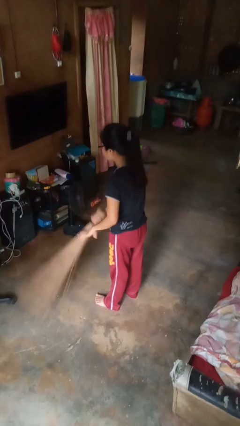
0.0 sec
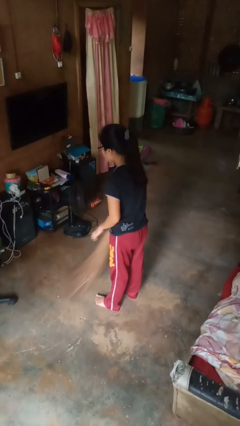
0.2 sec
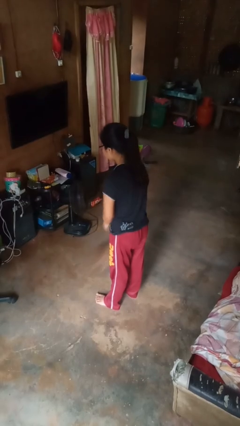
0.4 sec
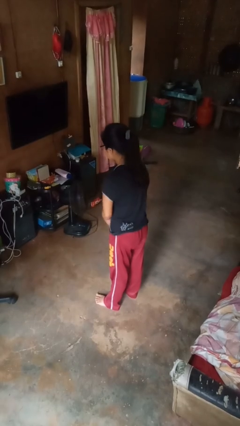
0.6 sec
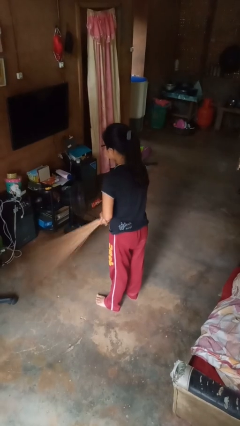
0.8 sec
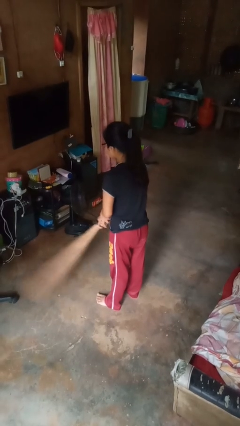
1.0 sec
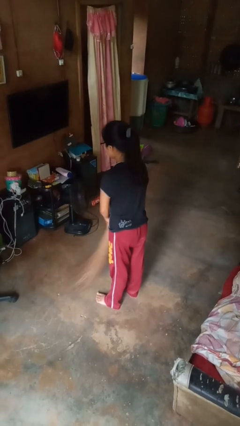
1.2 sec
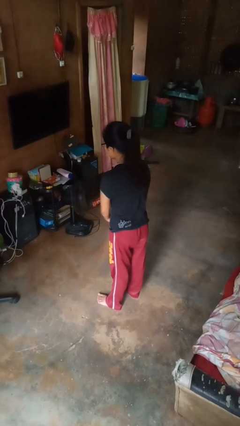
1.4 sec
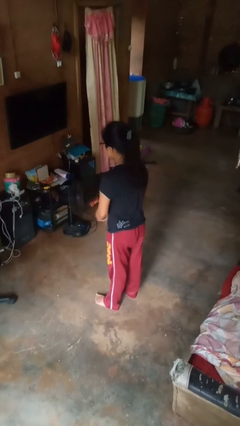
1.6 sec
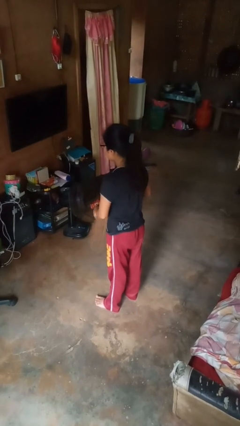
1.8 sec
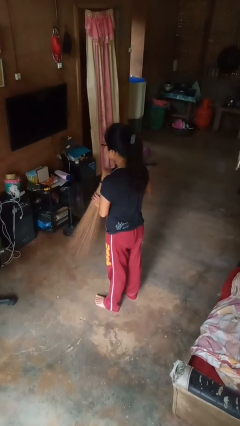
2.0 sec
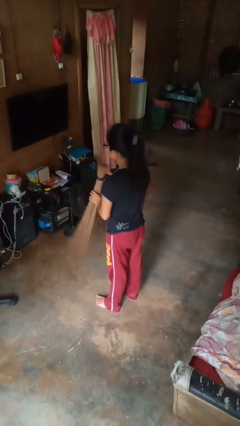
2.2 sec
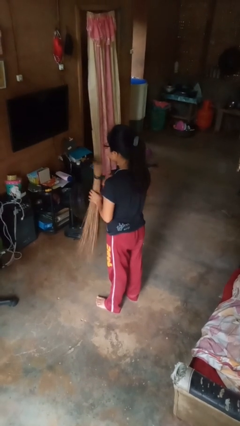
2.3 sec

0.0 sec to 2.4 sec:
person sweeps floor

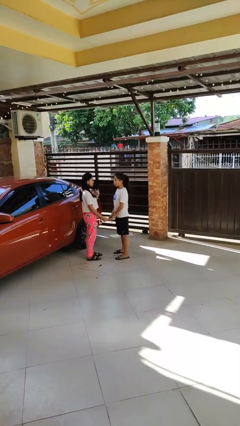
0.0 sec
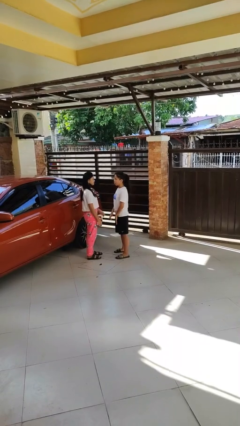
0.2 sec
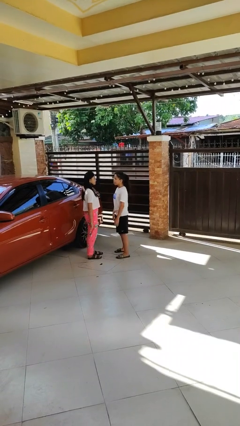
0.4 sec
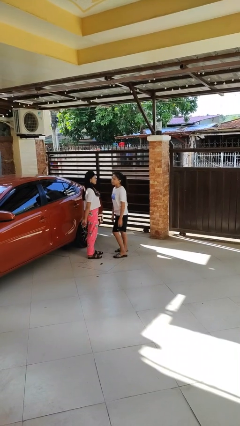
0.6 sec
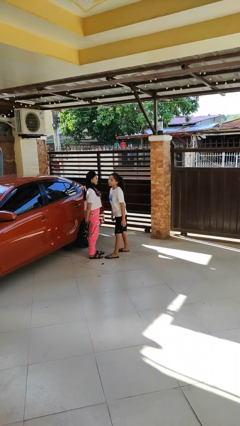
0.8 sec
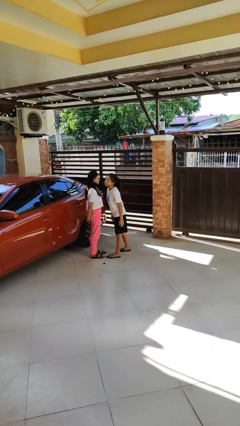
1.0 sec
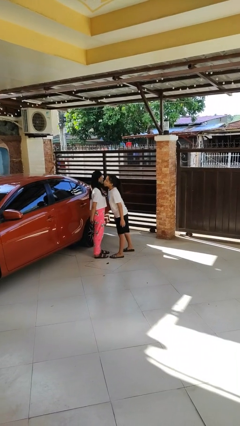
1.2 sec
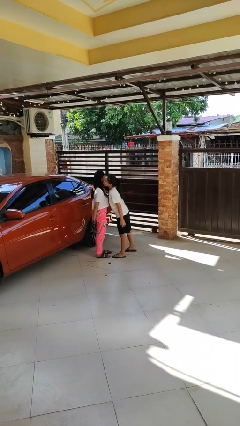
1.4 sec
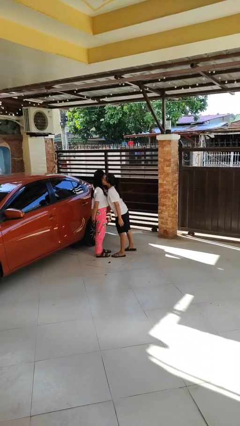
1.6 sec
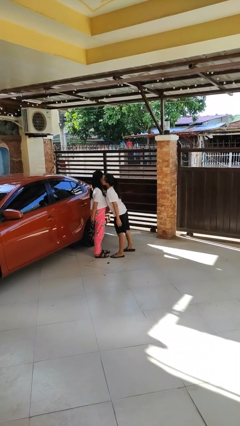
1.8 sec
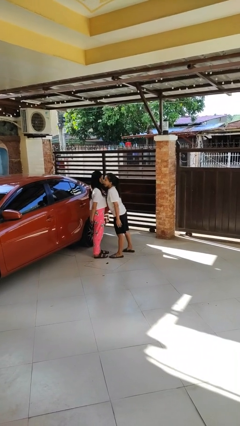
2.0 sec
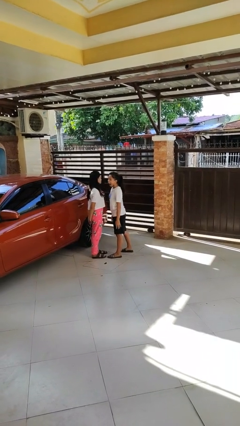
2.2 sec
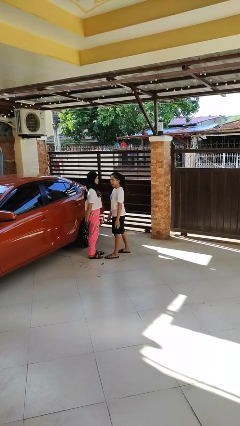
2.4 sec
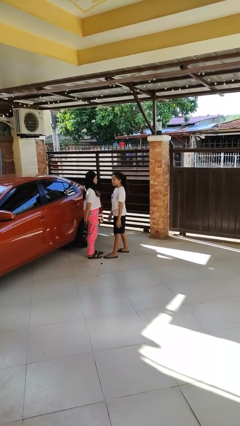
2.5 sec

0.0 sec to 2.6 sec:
person kisses cheek of person

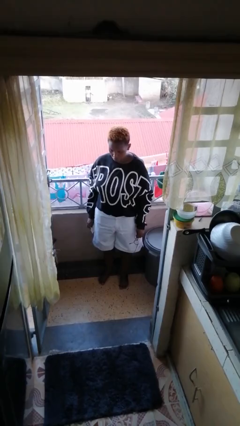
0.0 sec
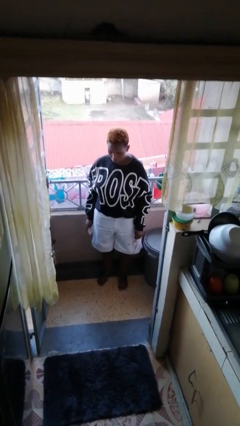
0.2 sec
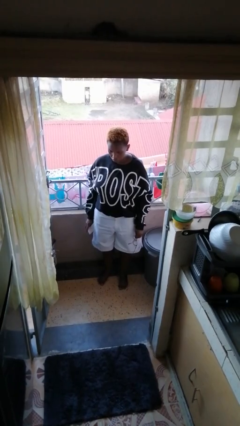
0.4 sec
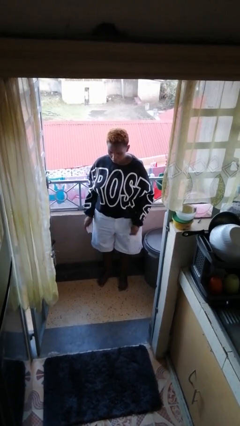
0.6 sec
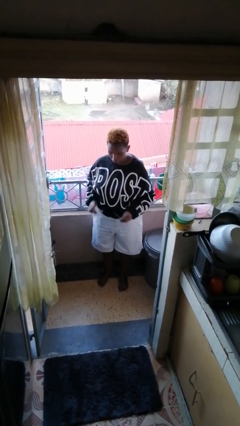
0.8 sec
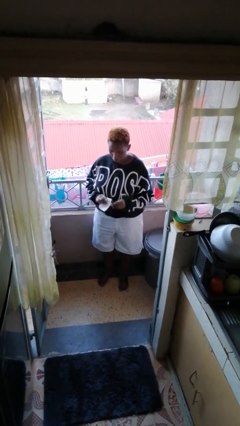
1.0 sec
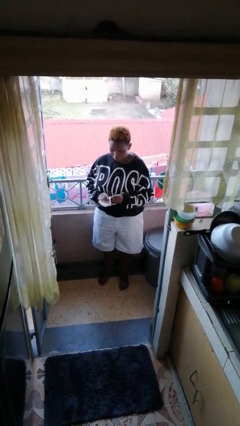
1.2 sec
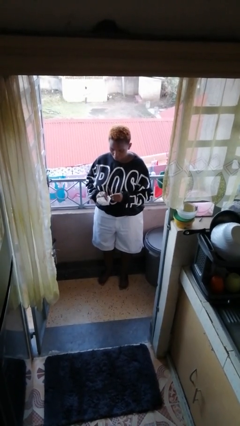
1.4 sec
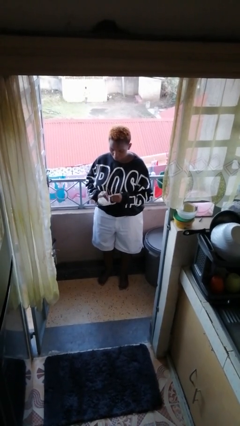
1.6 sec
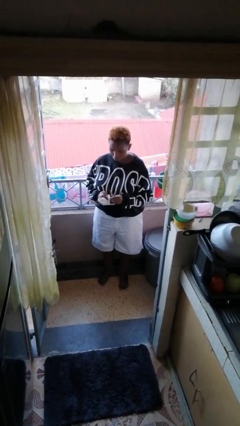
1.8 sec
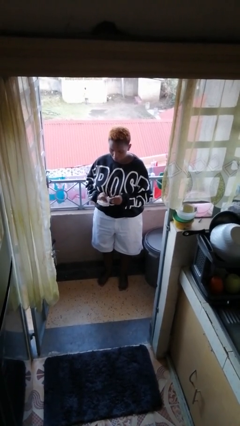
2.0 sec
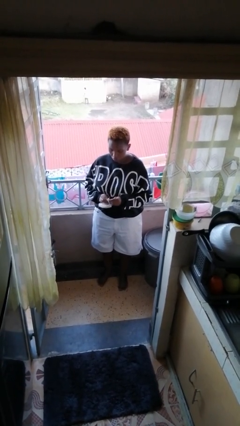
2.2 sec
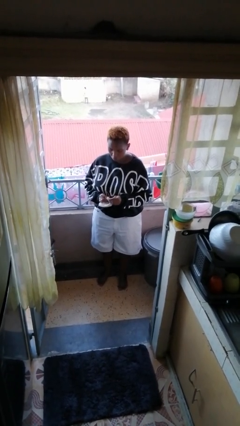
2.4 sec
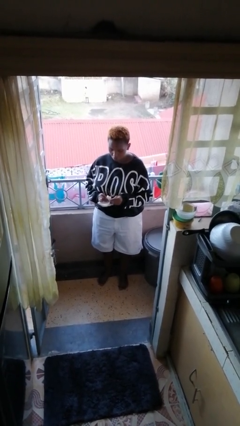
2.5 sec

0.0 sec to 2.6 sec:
person cleans eyeglasses

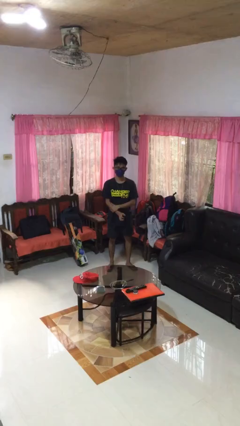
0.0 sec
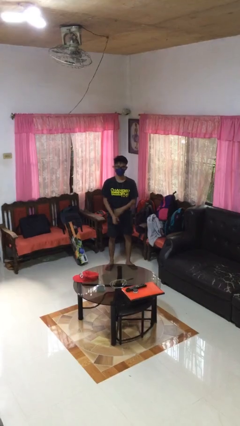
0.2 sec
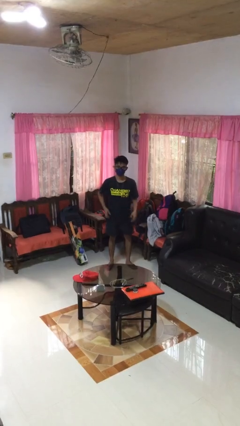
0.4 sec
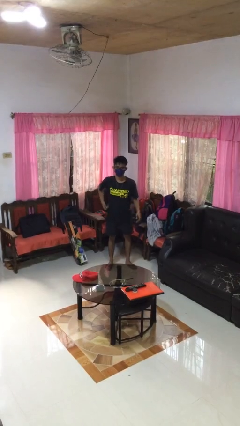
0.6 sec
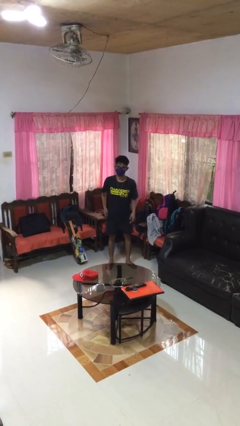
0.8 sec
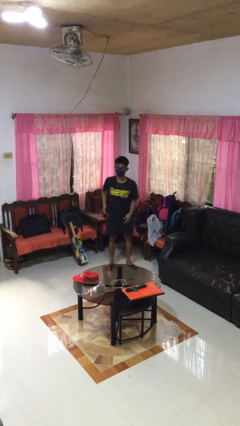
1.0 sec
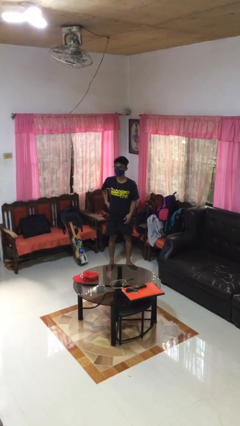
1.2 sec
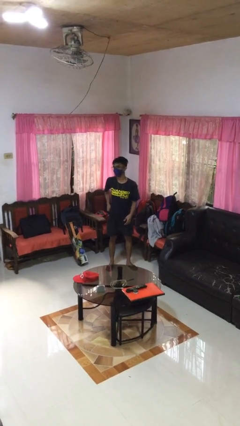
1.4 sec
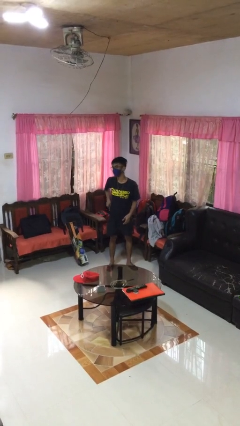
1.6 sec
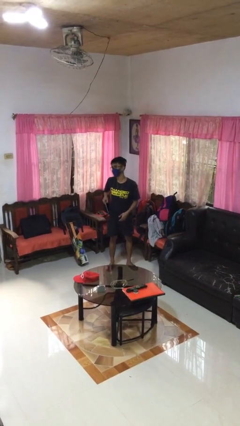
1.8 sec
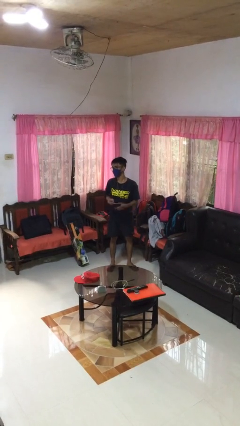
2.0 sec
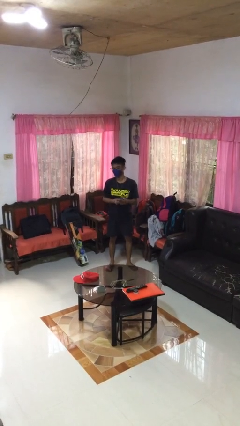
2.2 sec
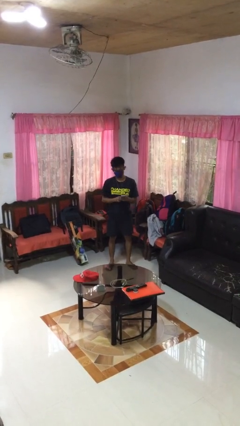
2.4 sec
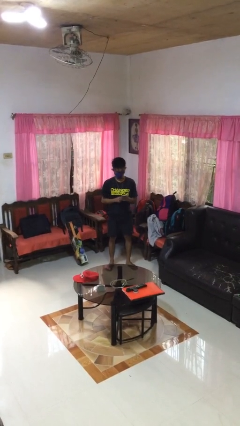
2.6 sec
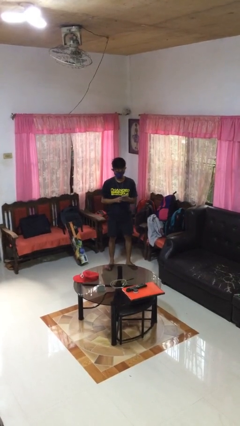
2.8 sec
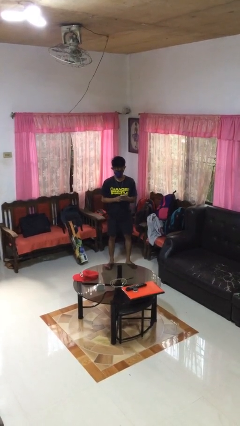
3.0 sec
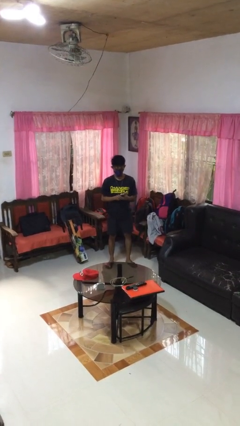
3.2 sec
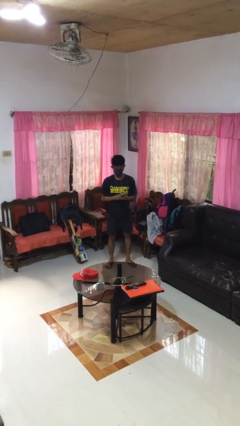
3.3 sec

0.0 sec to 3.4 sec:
person takes phone from pocket

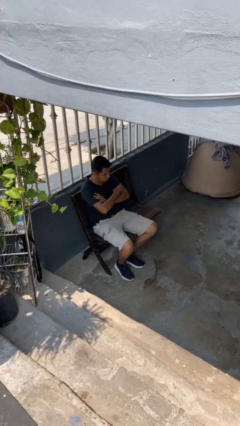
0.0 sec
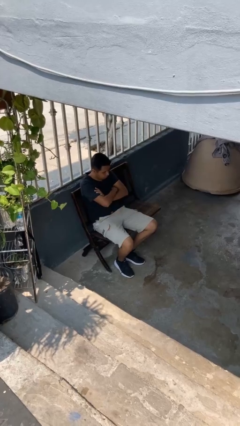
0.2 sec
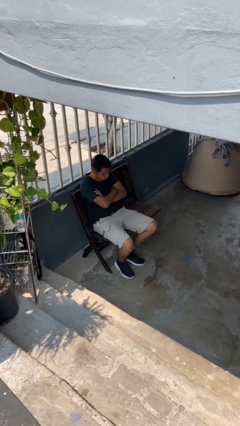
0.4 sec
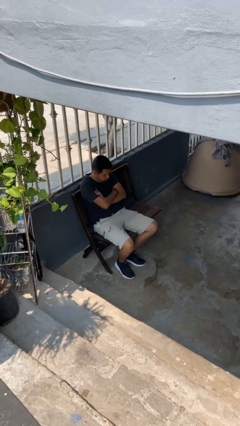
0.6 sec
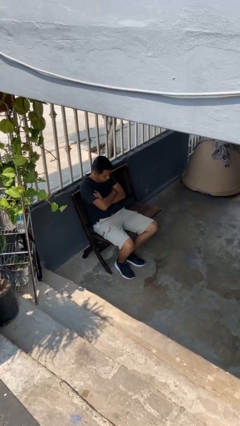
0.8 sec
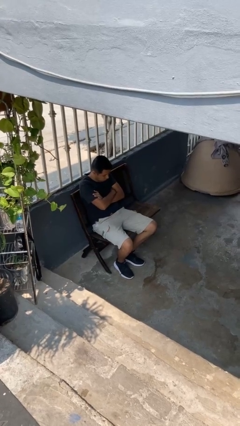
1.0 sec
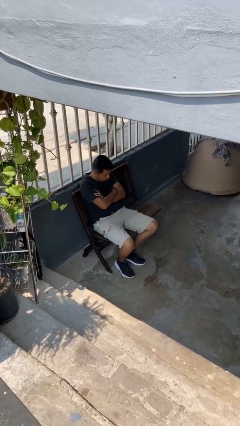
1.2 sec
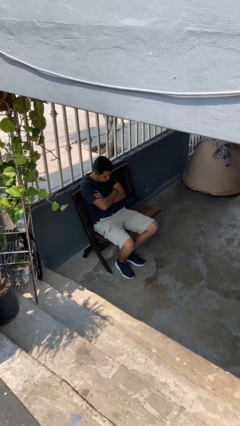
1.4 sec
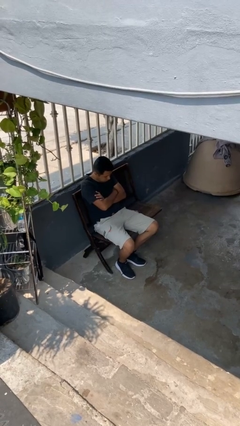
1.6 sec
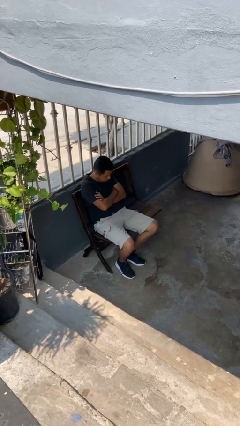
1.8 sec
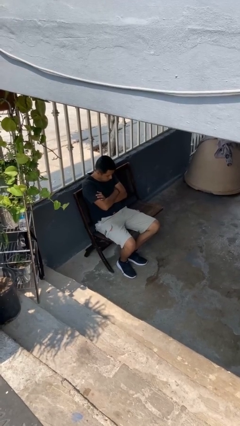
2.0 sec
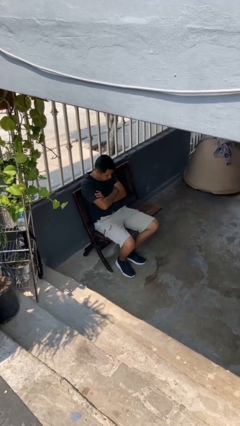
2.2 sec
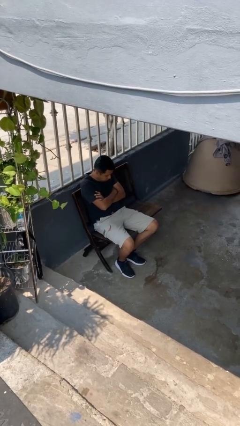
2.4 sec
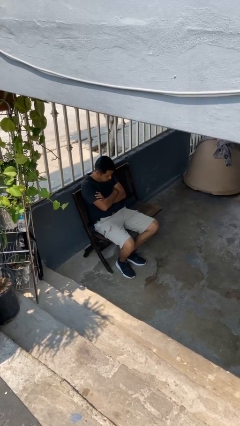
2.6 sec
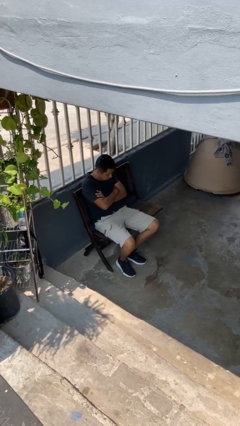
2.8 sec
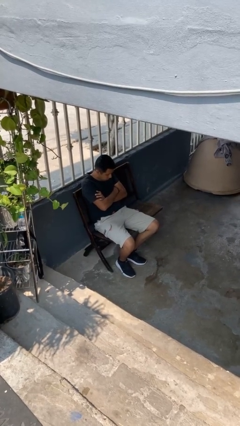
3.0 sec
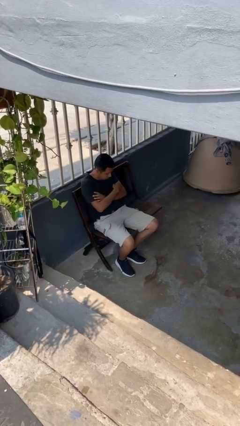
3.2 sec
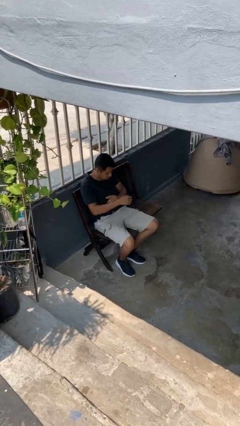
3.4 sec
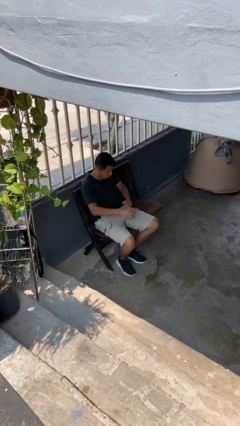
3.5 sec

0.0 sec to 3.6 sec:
person crosses arms

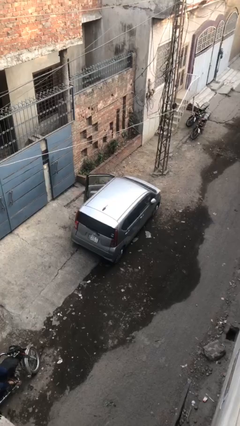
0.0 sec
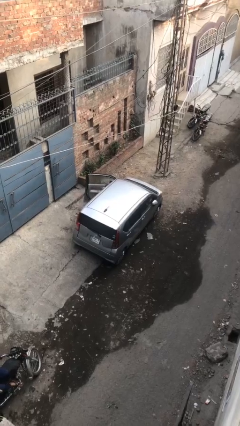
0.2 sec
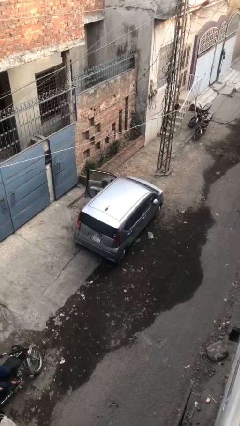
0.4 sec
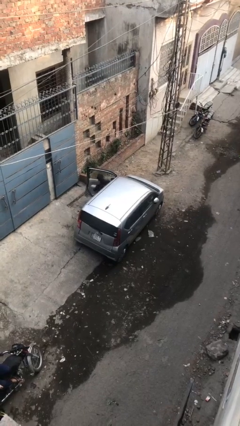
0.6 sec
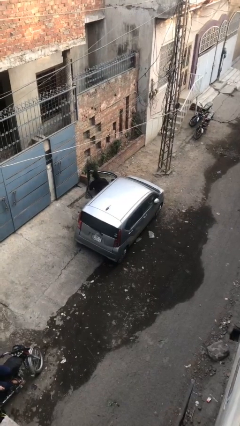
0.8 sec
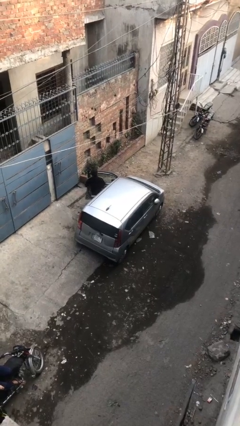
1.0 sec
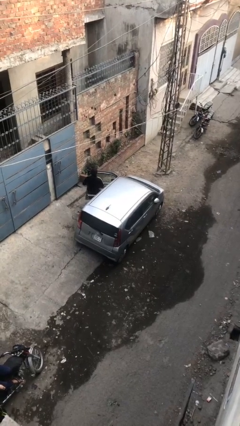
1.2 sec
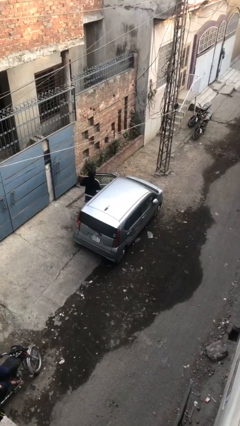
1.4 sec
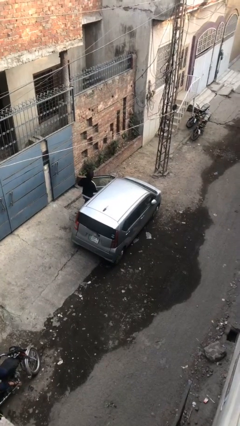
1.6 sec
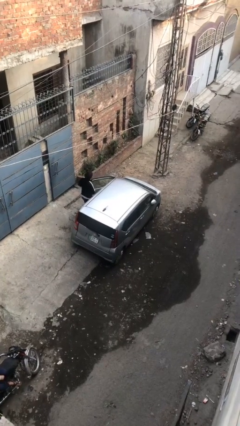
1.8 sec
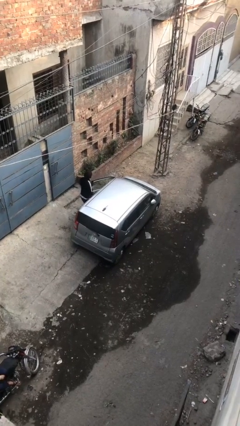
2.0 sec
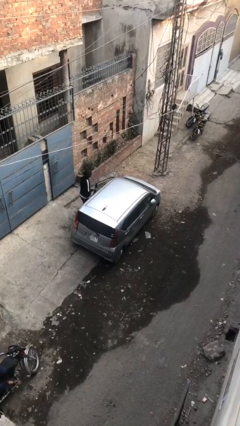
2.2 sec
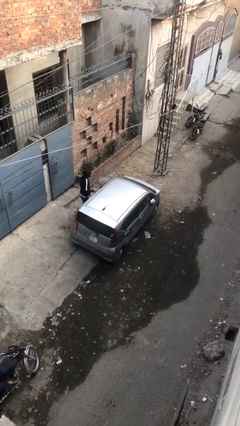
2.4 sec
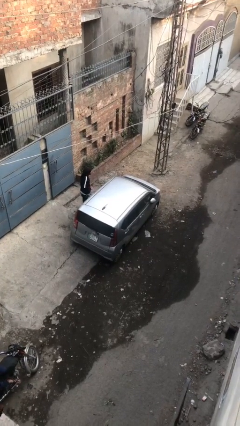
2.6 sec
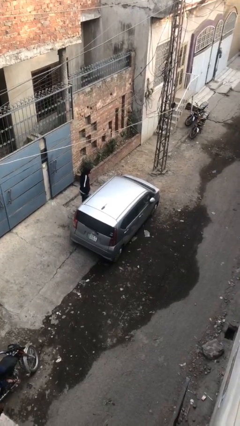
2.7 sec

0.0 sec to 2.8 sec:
car drops off person

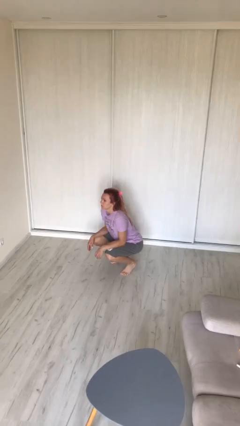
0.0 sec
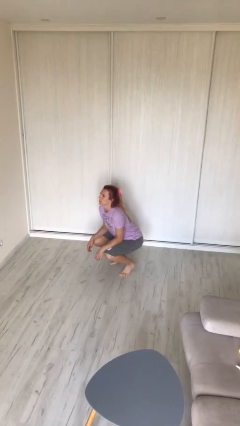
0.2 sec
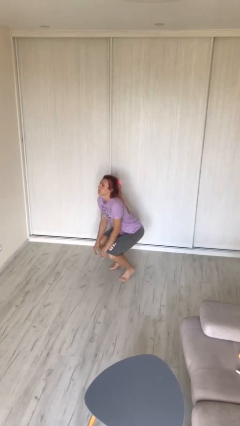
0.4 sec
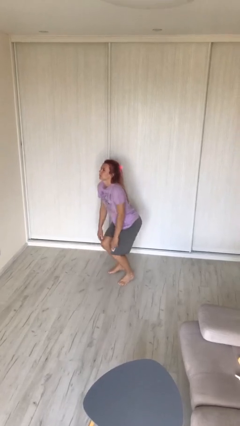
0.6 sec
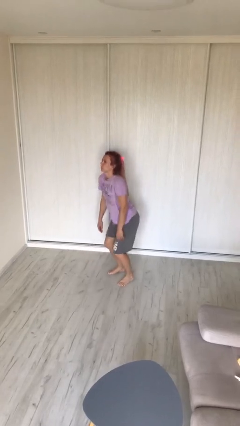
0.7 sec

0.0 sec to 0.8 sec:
person stands up
